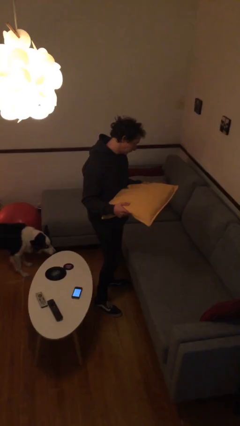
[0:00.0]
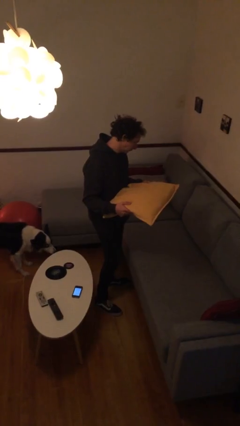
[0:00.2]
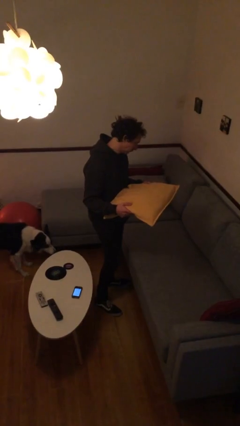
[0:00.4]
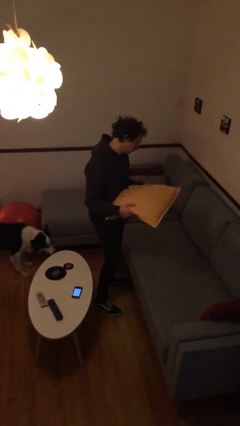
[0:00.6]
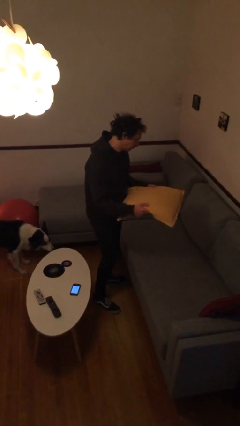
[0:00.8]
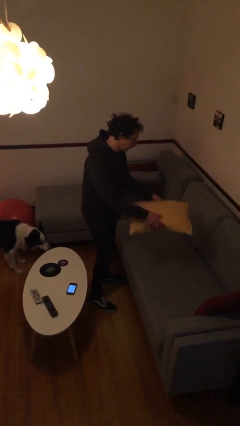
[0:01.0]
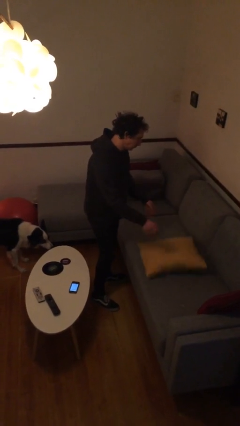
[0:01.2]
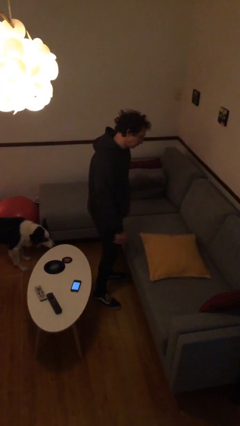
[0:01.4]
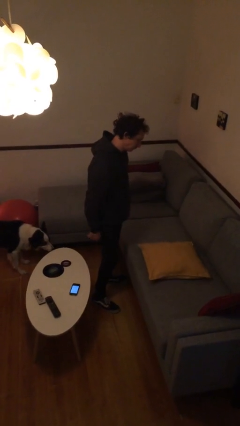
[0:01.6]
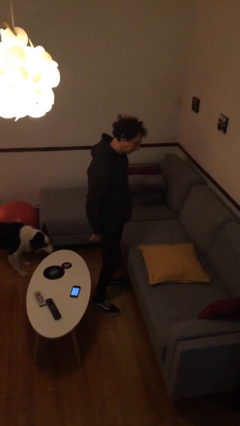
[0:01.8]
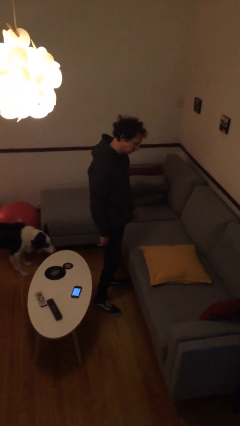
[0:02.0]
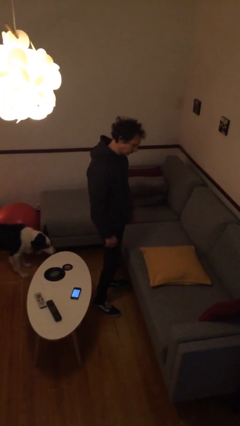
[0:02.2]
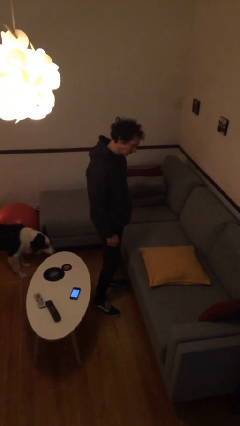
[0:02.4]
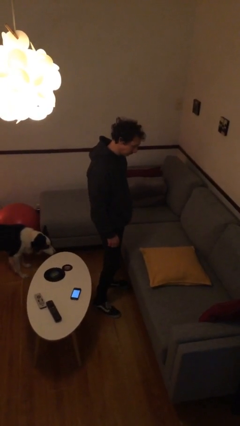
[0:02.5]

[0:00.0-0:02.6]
person puts down object on couch

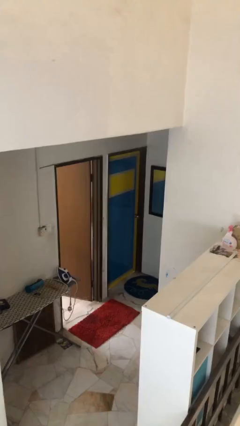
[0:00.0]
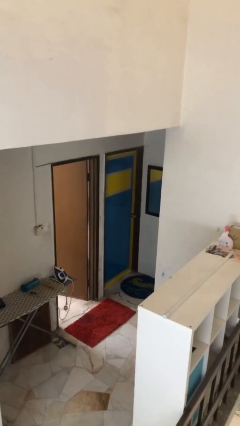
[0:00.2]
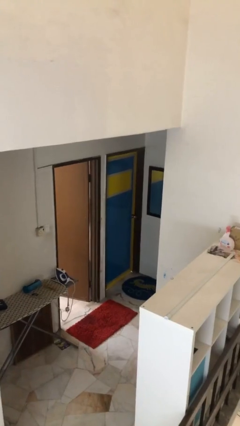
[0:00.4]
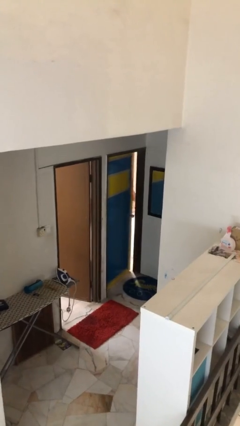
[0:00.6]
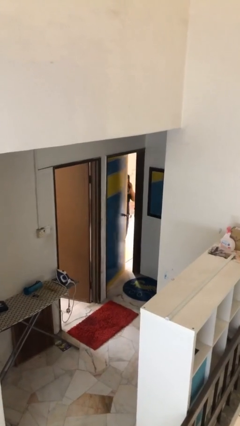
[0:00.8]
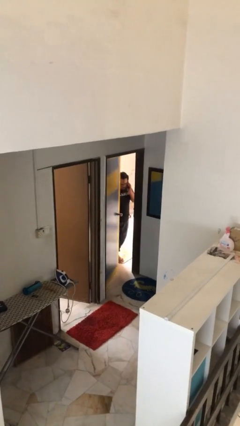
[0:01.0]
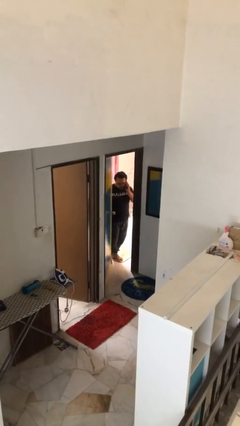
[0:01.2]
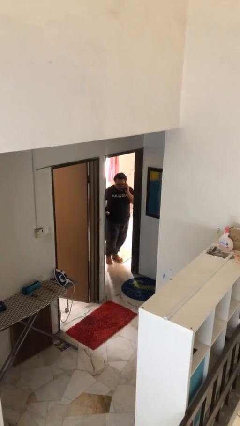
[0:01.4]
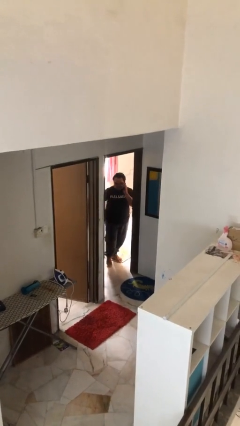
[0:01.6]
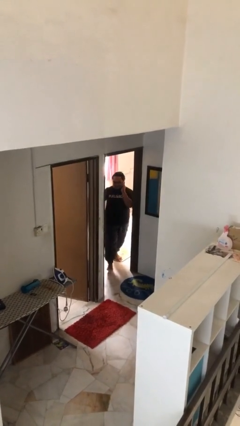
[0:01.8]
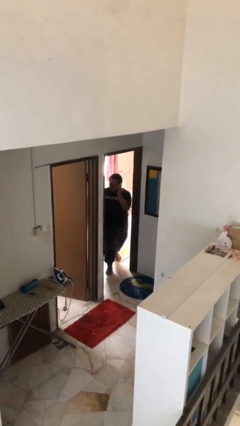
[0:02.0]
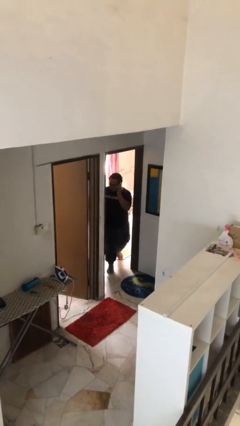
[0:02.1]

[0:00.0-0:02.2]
person opens facility door

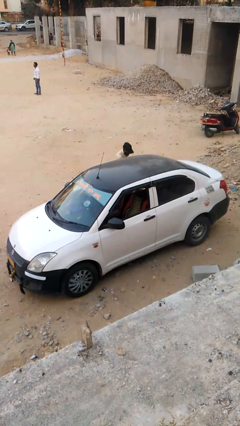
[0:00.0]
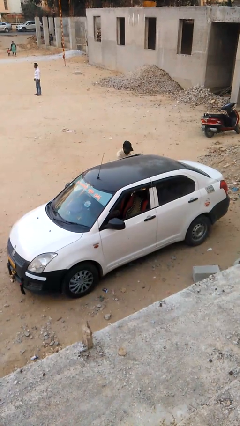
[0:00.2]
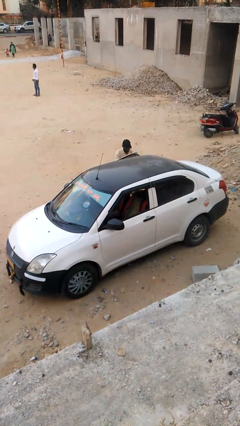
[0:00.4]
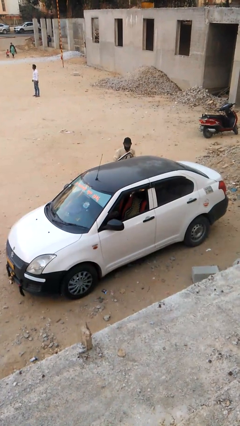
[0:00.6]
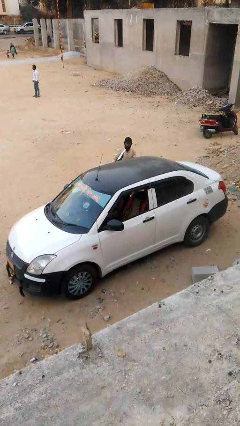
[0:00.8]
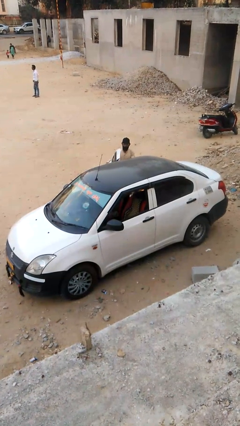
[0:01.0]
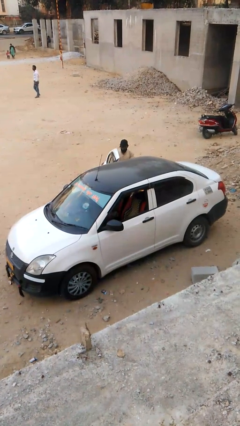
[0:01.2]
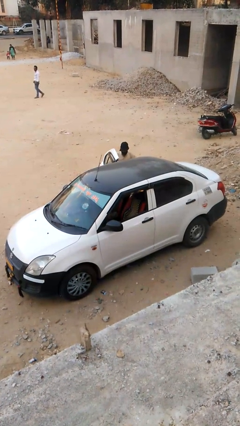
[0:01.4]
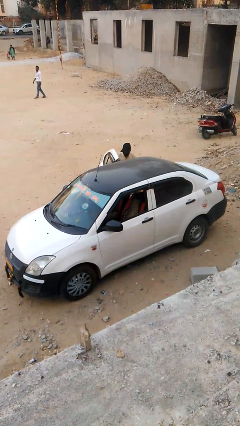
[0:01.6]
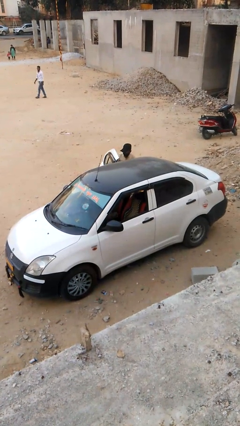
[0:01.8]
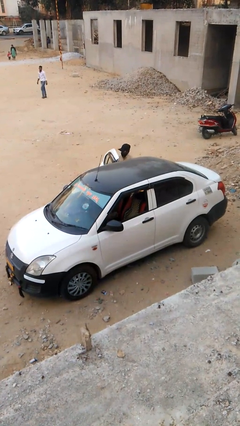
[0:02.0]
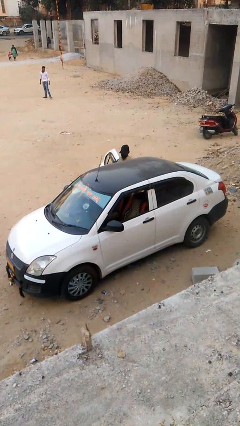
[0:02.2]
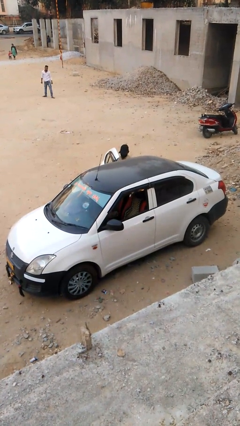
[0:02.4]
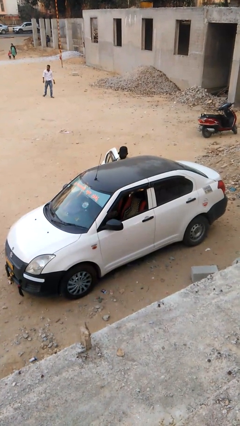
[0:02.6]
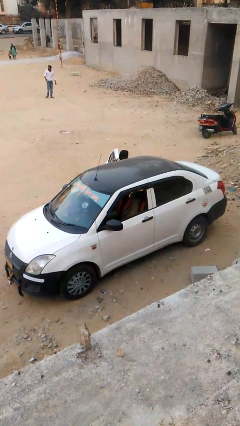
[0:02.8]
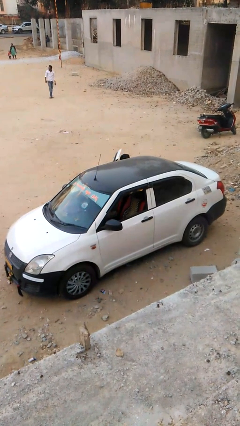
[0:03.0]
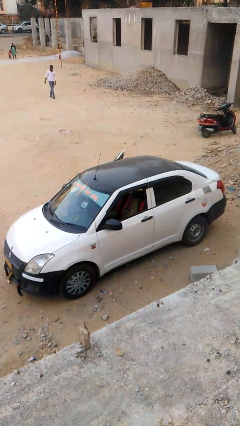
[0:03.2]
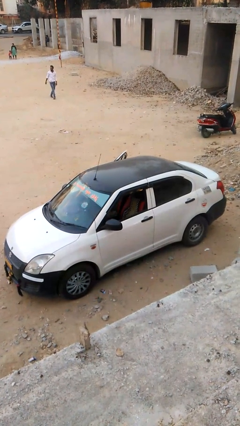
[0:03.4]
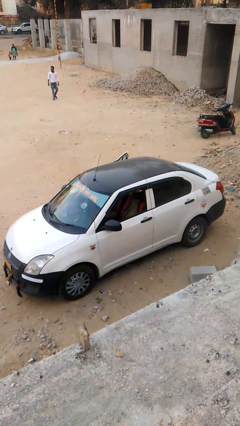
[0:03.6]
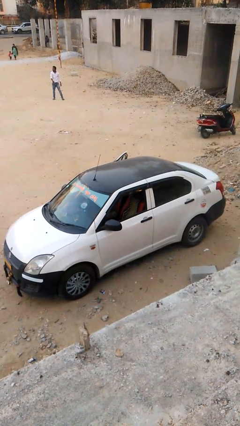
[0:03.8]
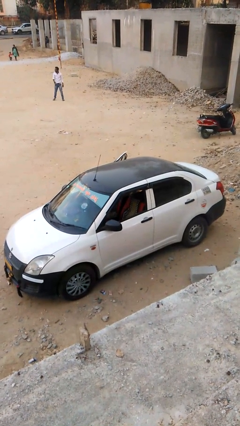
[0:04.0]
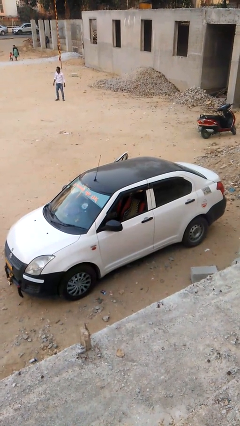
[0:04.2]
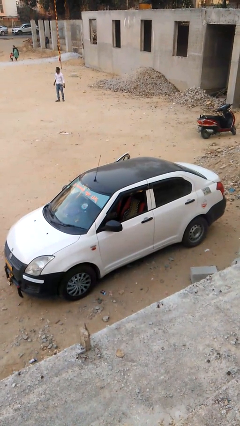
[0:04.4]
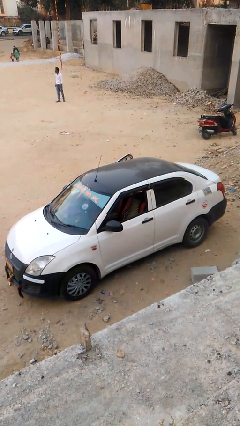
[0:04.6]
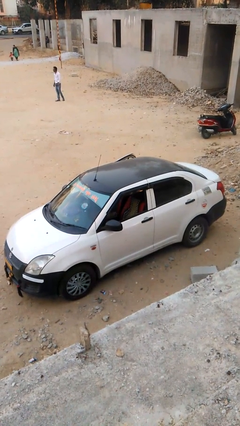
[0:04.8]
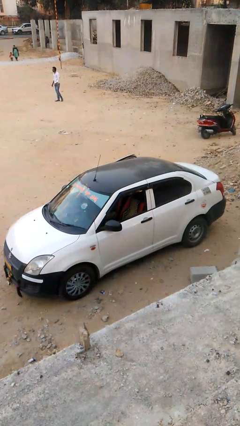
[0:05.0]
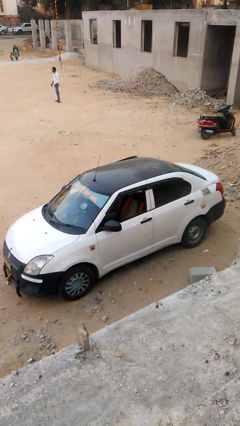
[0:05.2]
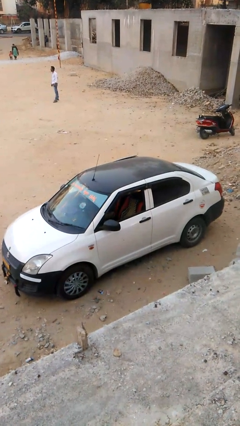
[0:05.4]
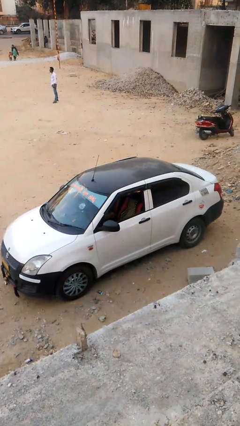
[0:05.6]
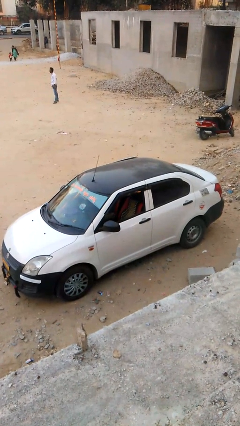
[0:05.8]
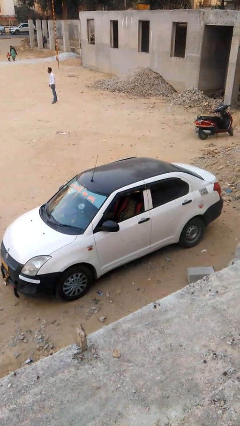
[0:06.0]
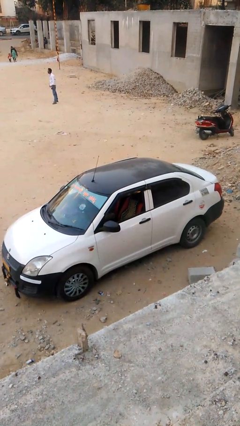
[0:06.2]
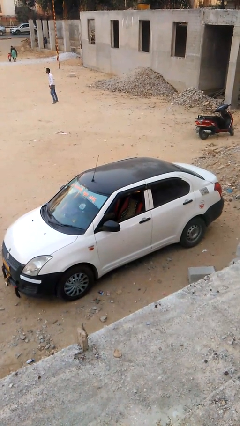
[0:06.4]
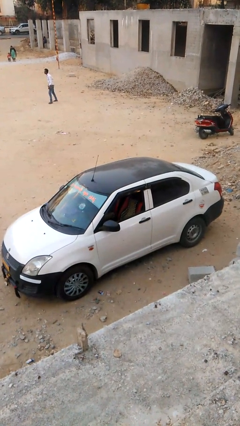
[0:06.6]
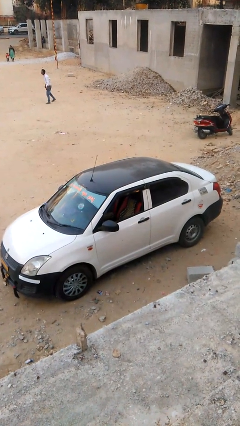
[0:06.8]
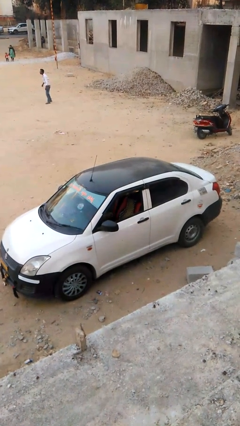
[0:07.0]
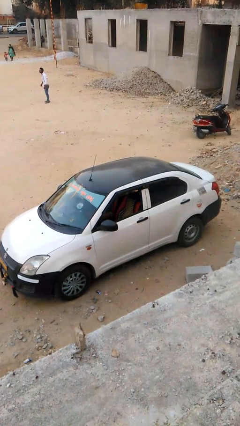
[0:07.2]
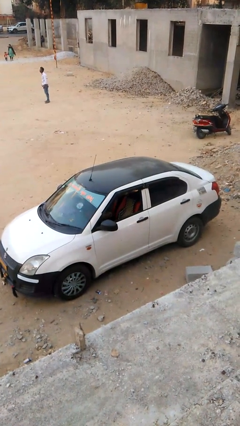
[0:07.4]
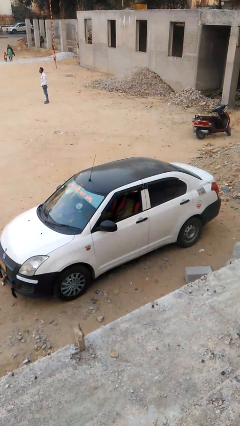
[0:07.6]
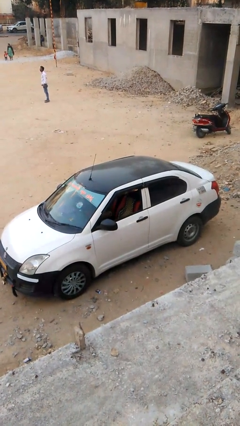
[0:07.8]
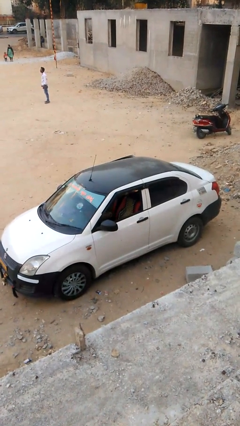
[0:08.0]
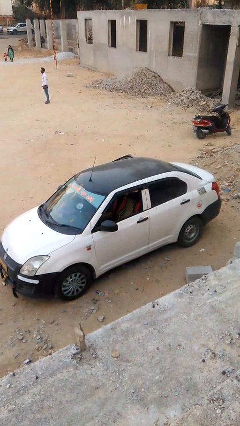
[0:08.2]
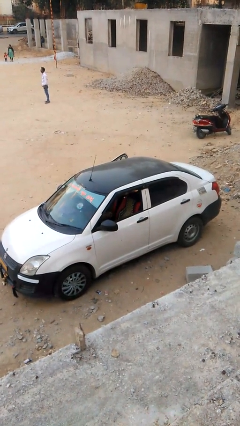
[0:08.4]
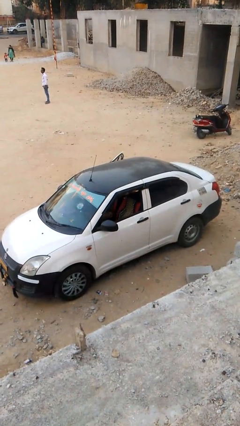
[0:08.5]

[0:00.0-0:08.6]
car picks up person

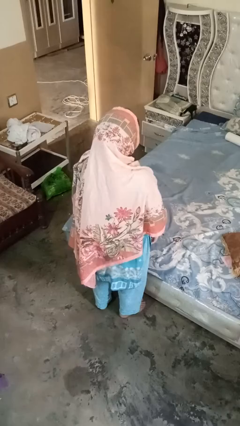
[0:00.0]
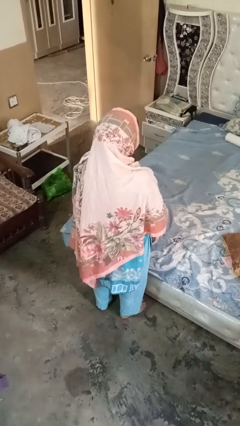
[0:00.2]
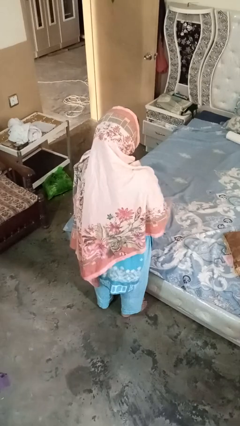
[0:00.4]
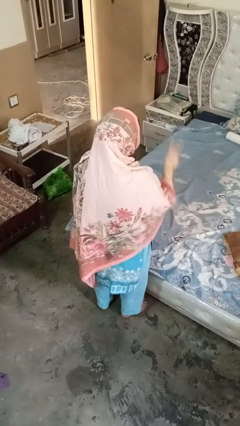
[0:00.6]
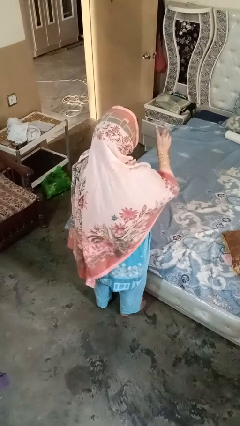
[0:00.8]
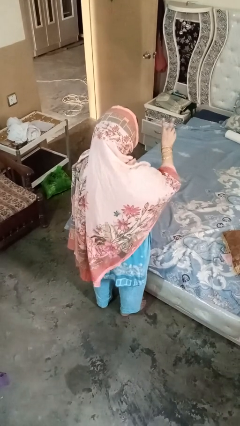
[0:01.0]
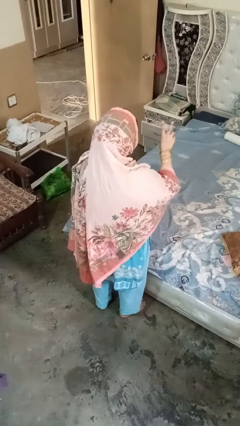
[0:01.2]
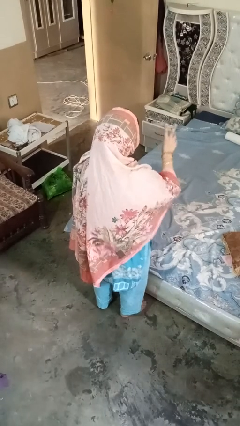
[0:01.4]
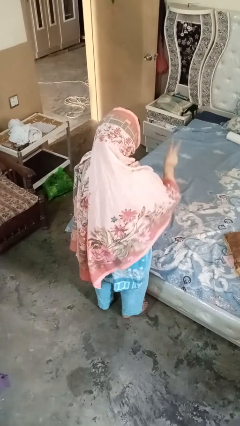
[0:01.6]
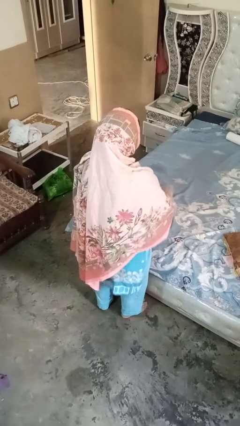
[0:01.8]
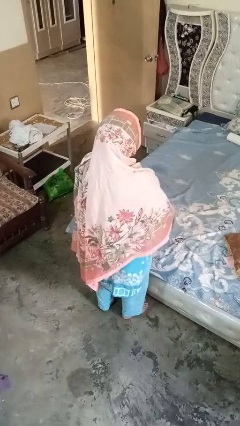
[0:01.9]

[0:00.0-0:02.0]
person gestures be quiet

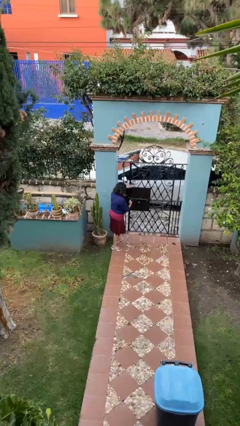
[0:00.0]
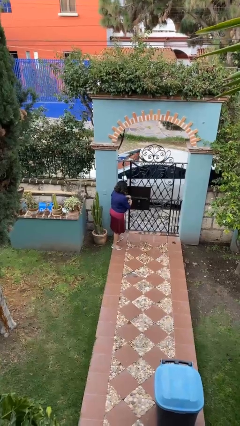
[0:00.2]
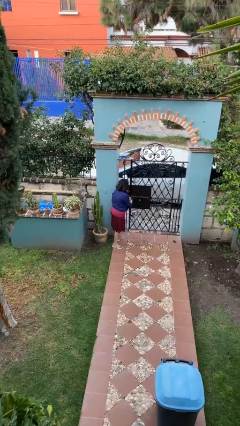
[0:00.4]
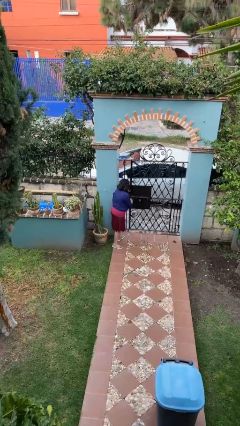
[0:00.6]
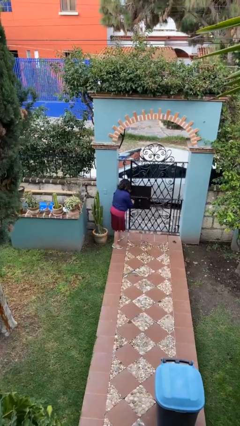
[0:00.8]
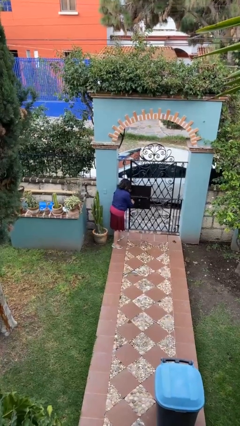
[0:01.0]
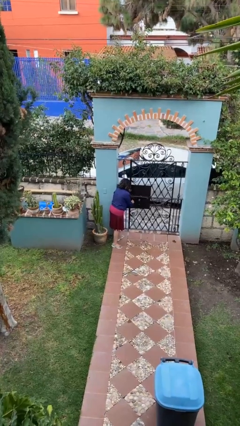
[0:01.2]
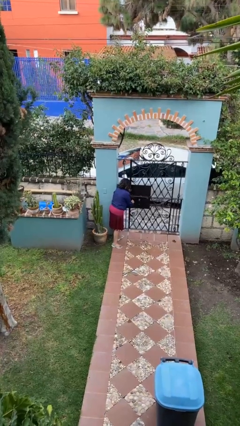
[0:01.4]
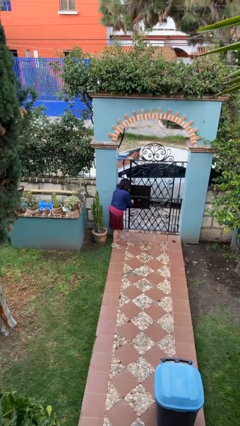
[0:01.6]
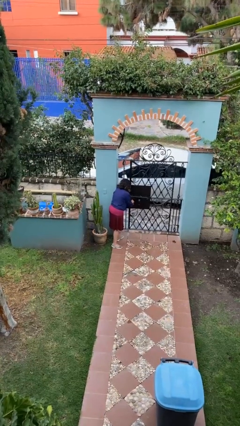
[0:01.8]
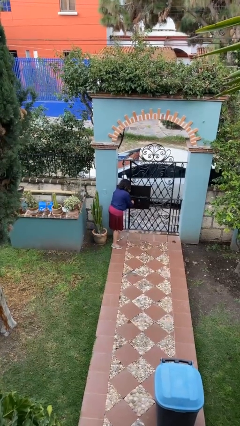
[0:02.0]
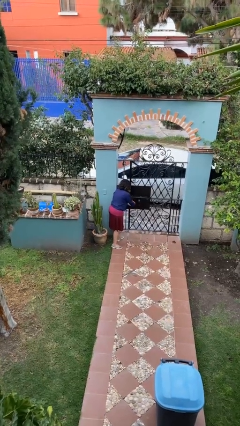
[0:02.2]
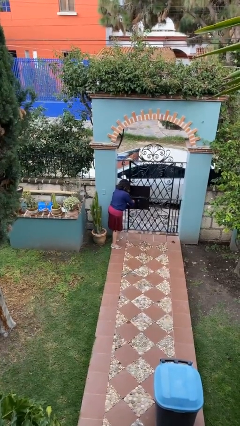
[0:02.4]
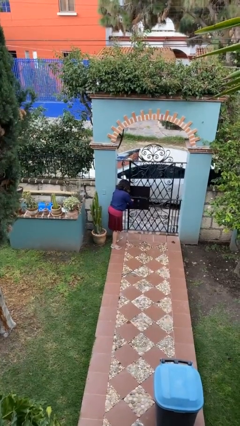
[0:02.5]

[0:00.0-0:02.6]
person locks door with keys
